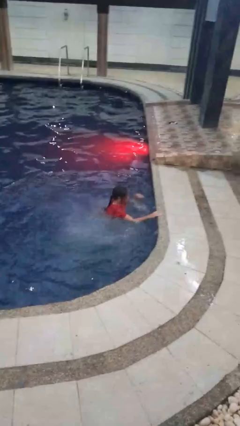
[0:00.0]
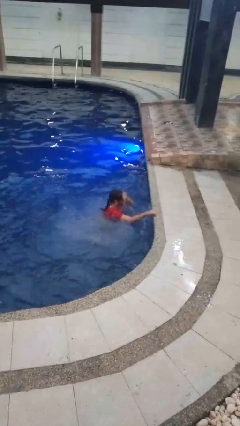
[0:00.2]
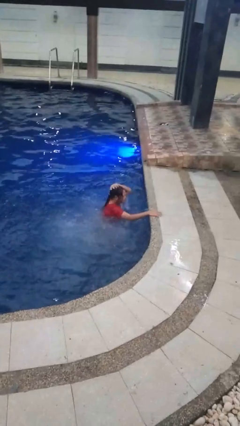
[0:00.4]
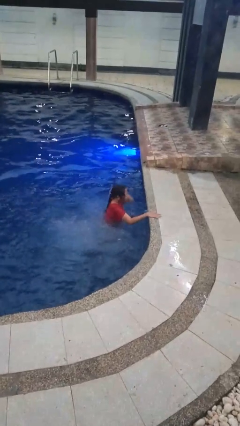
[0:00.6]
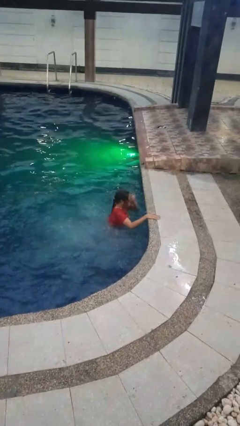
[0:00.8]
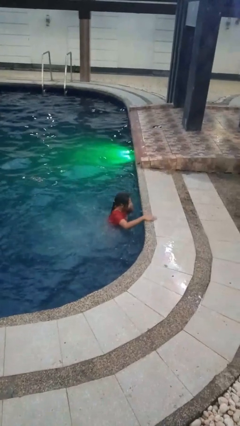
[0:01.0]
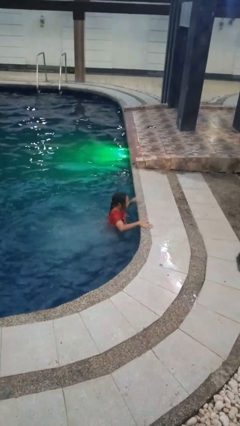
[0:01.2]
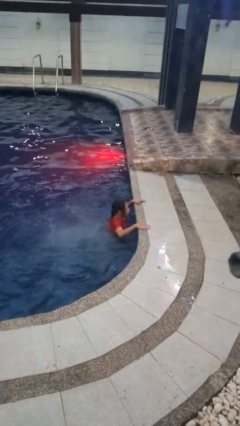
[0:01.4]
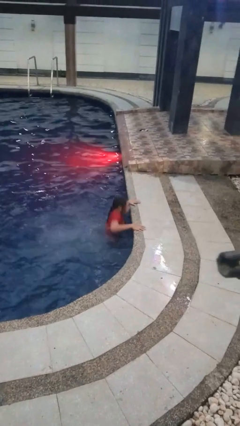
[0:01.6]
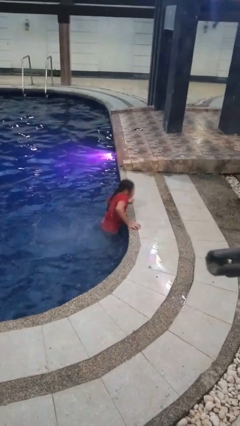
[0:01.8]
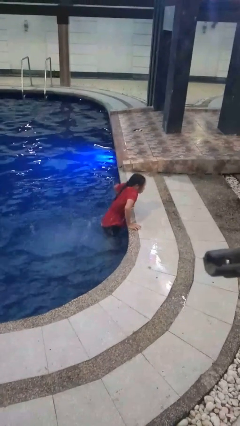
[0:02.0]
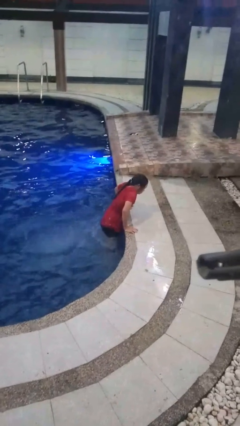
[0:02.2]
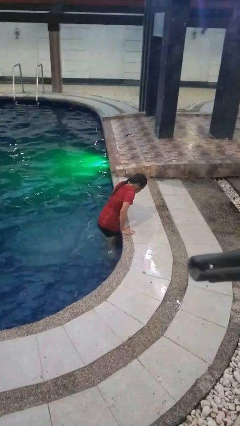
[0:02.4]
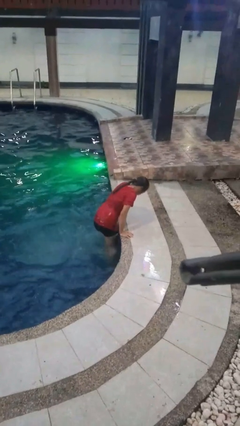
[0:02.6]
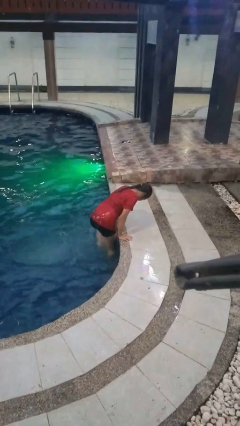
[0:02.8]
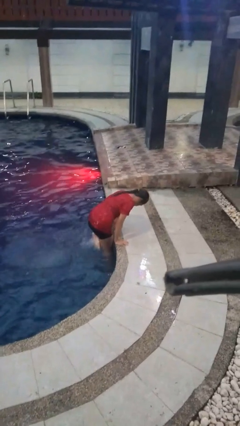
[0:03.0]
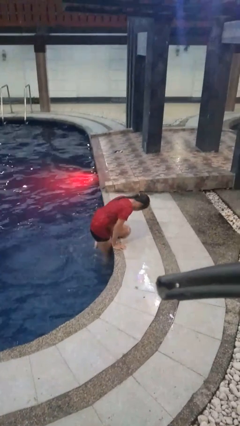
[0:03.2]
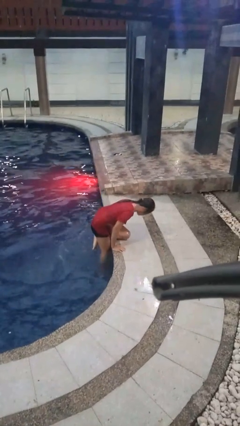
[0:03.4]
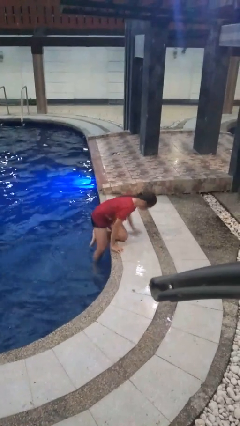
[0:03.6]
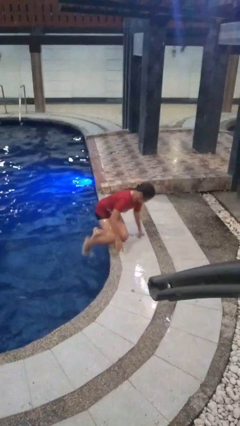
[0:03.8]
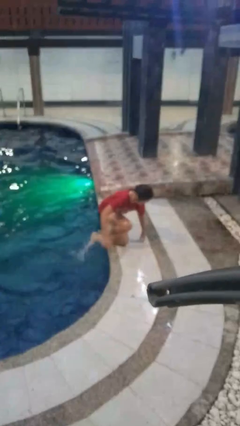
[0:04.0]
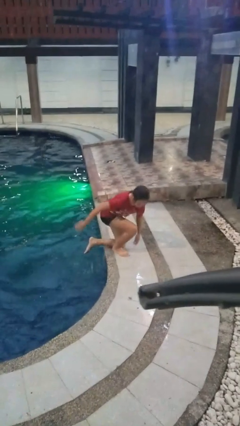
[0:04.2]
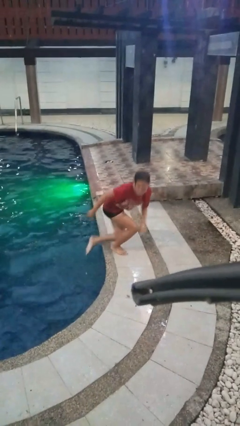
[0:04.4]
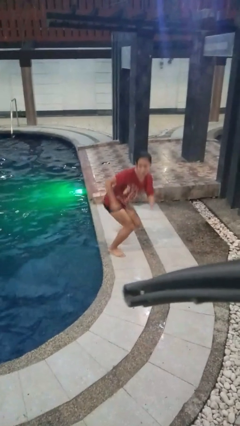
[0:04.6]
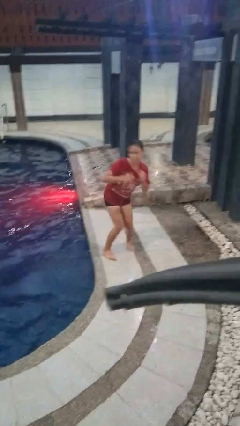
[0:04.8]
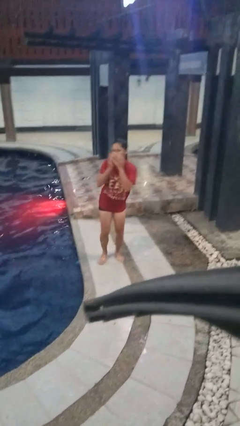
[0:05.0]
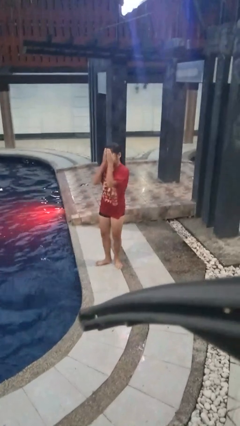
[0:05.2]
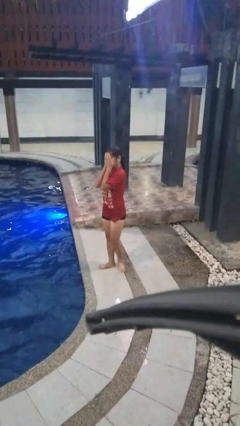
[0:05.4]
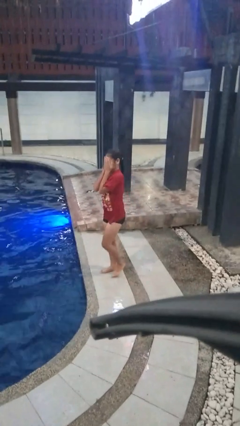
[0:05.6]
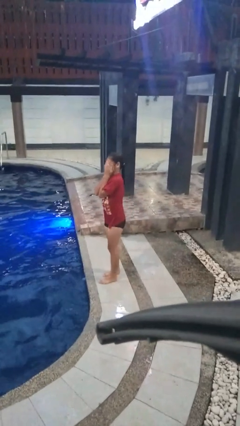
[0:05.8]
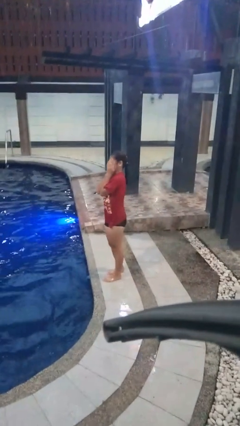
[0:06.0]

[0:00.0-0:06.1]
person exits pool

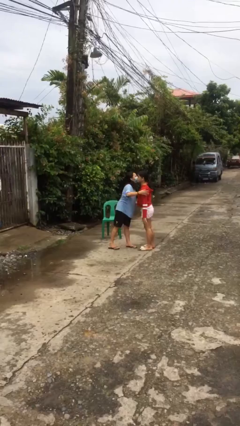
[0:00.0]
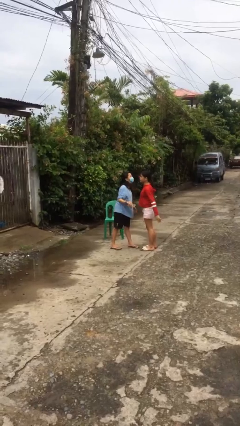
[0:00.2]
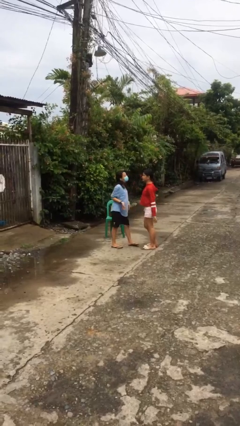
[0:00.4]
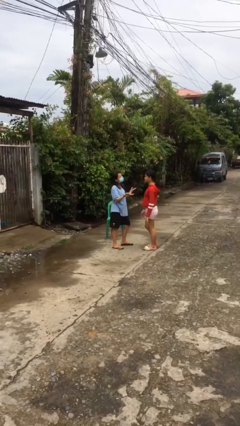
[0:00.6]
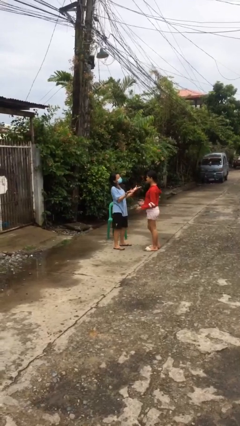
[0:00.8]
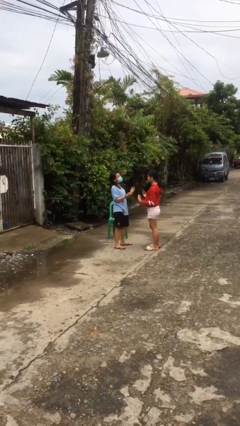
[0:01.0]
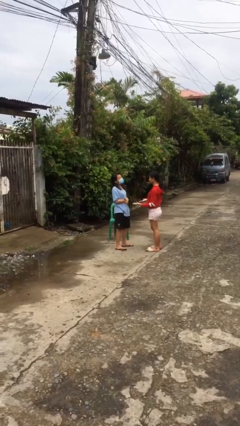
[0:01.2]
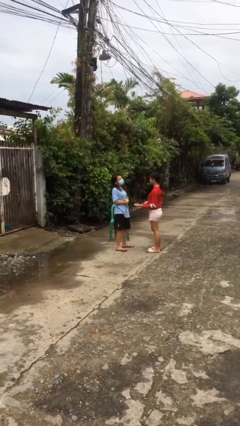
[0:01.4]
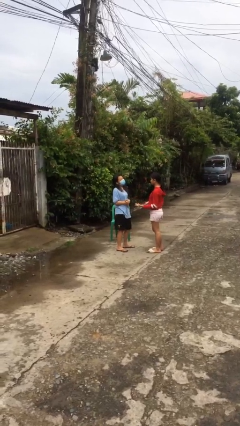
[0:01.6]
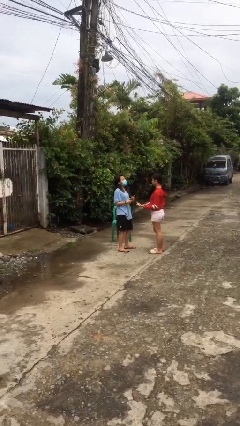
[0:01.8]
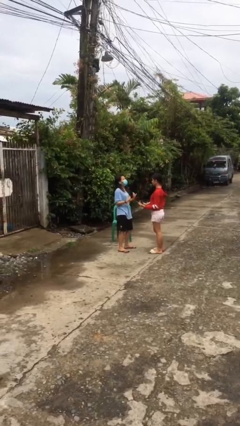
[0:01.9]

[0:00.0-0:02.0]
person talks to person

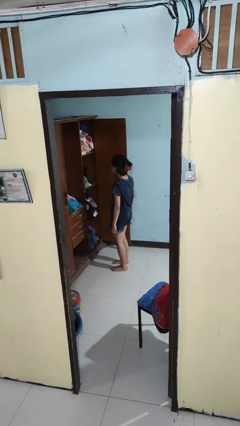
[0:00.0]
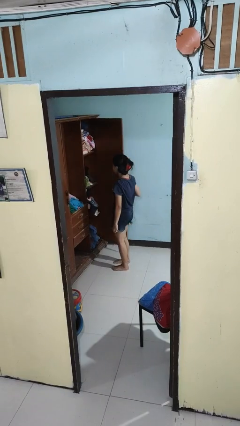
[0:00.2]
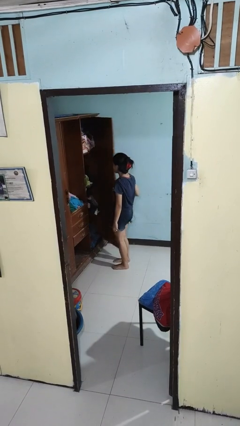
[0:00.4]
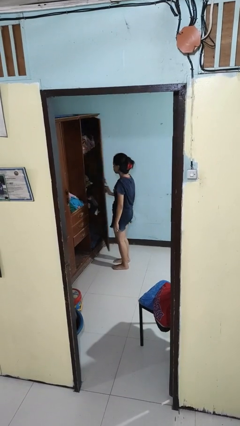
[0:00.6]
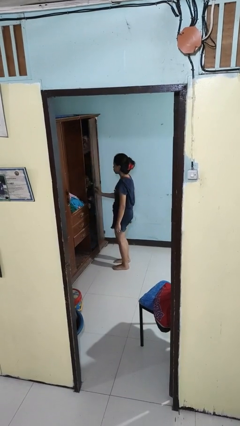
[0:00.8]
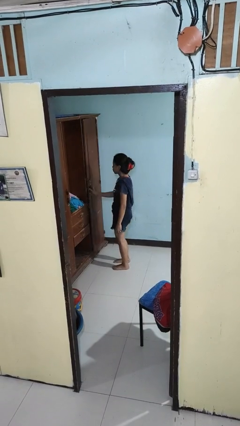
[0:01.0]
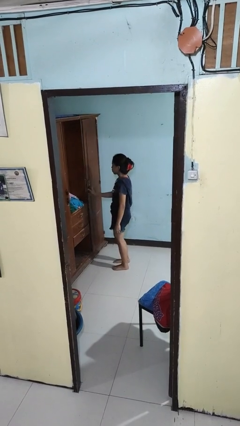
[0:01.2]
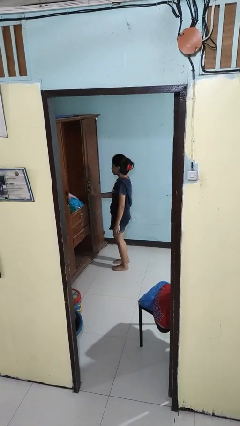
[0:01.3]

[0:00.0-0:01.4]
person closes closet door

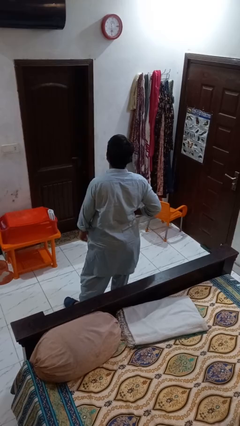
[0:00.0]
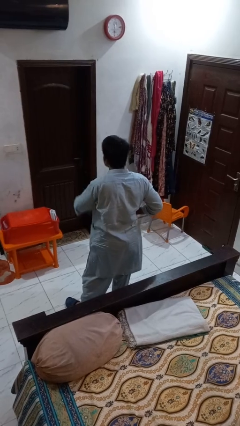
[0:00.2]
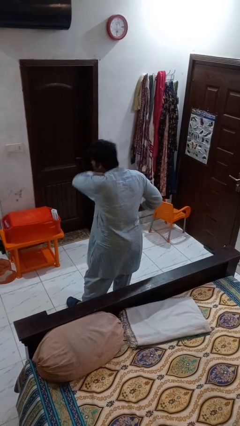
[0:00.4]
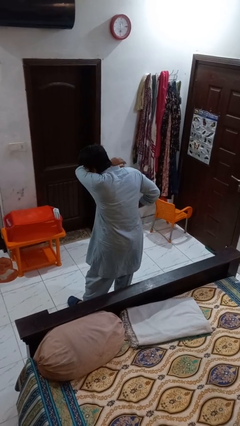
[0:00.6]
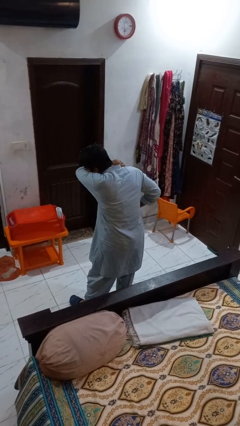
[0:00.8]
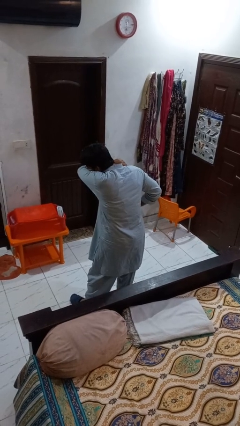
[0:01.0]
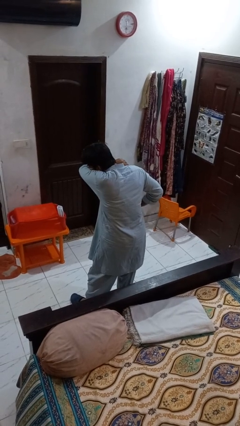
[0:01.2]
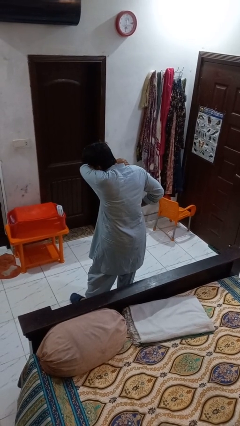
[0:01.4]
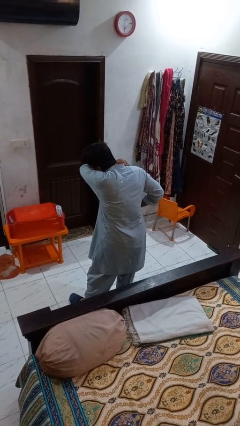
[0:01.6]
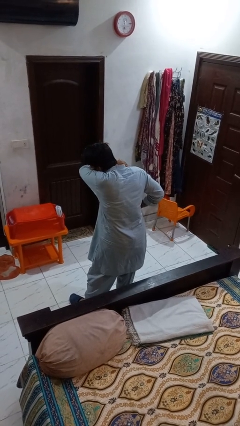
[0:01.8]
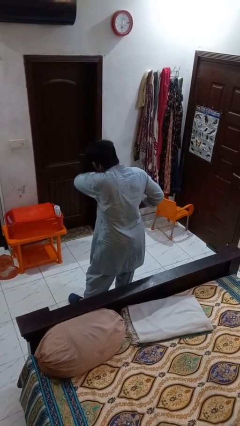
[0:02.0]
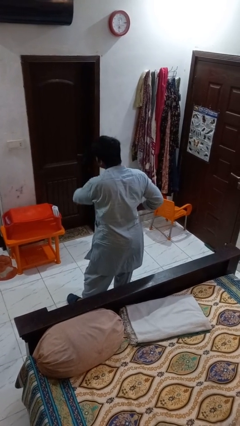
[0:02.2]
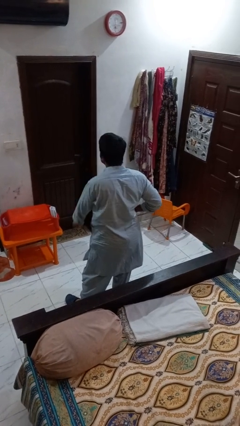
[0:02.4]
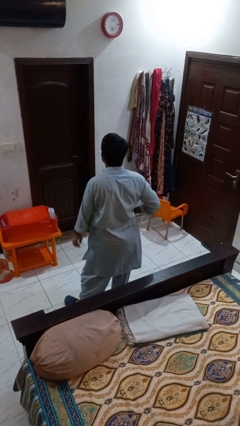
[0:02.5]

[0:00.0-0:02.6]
person sneezes into arm

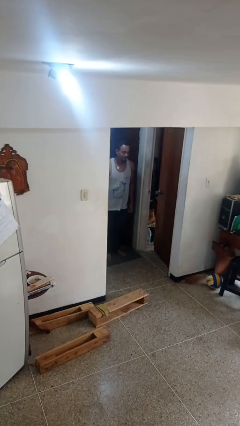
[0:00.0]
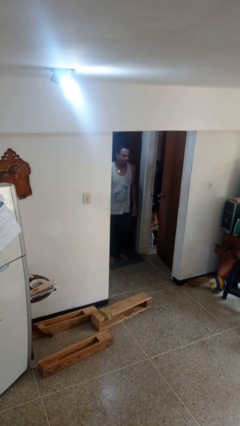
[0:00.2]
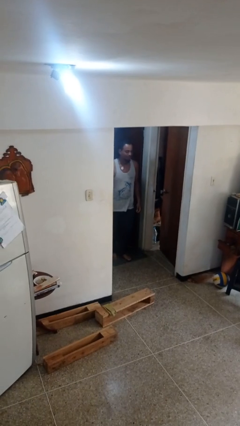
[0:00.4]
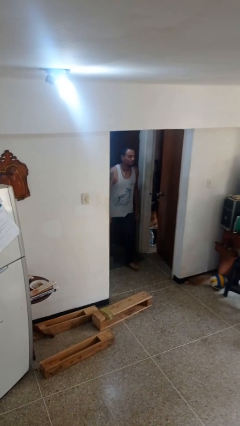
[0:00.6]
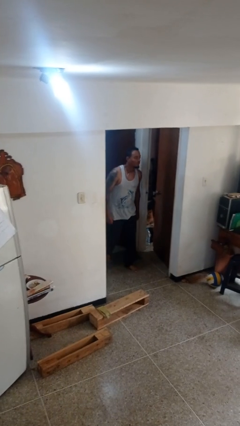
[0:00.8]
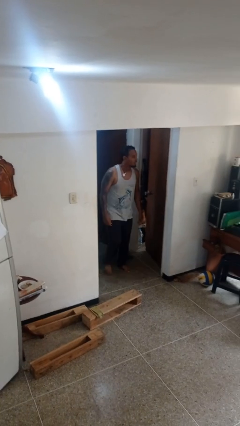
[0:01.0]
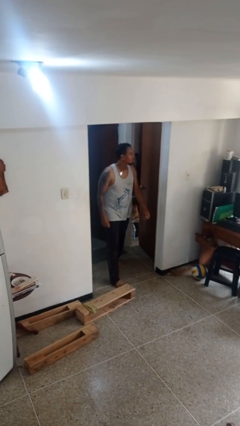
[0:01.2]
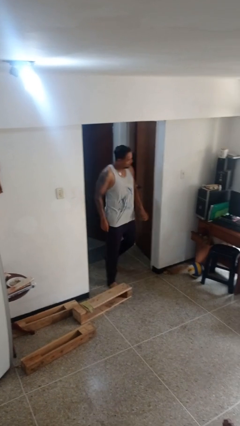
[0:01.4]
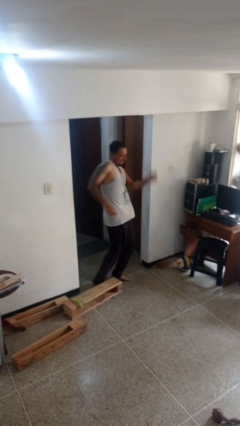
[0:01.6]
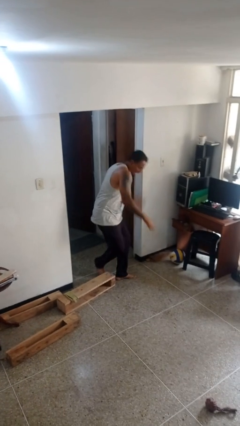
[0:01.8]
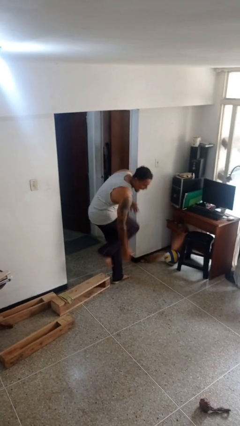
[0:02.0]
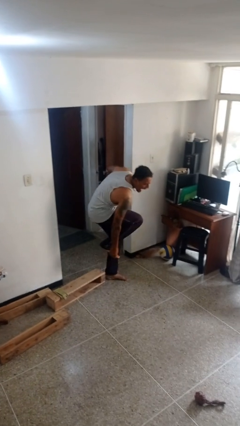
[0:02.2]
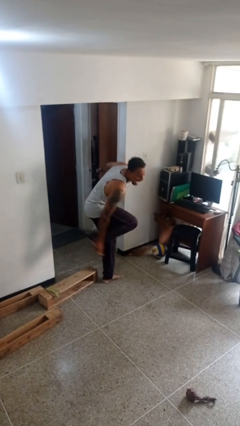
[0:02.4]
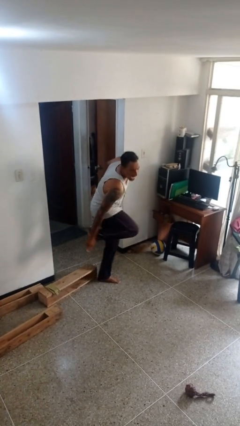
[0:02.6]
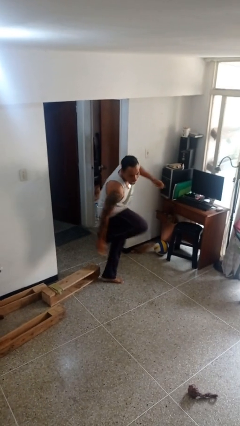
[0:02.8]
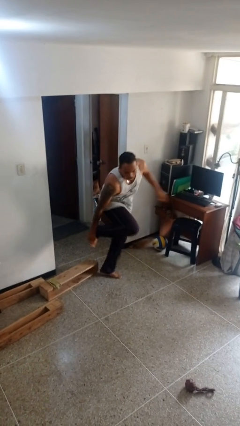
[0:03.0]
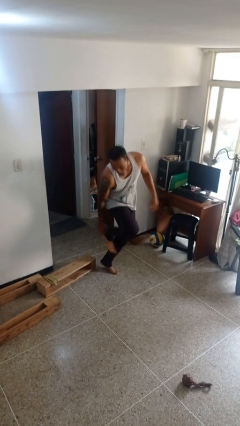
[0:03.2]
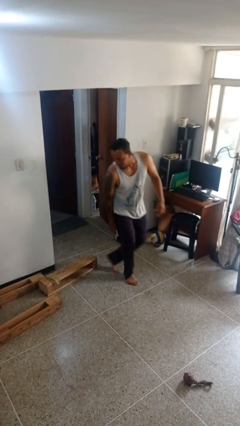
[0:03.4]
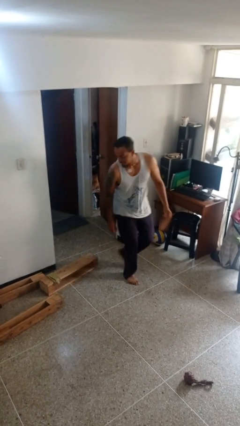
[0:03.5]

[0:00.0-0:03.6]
person stubs toe

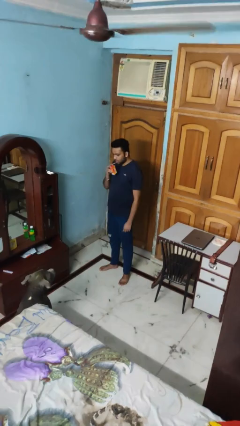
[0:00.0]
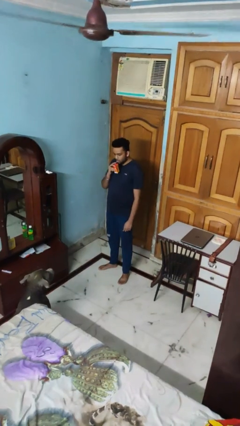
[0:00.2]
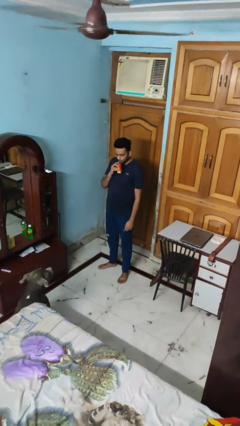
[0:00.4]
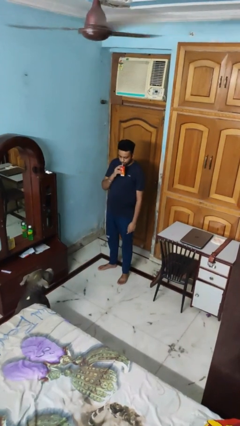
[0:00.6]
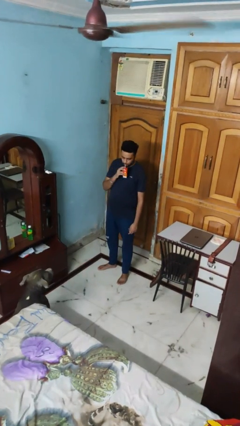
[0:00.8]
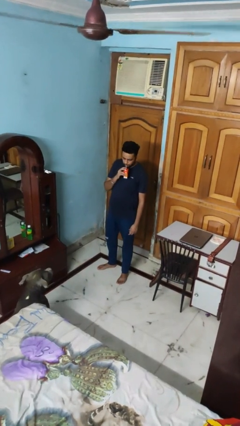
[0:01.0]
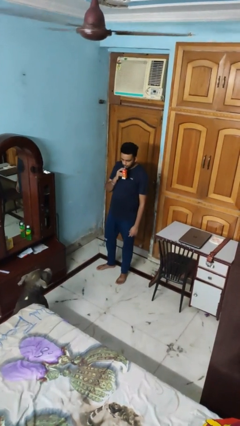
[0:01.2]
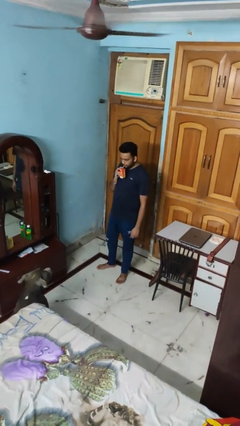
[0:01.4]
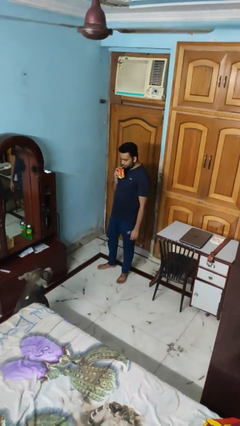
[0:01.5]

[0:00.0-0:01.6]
person drinks from straw

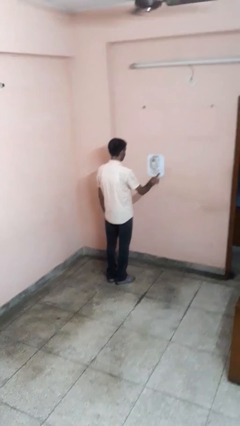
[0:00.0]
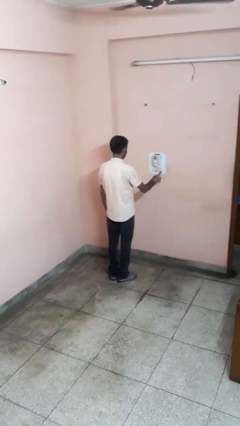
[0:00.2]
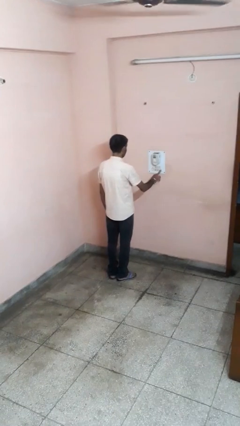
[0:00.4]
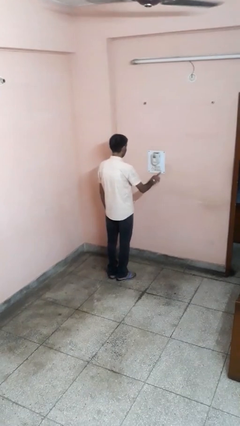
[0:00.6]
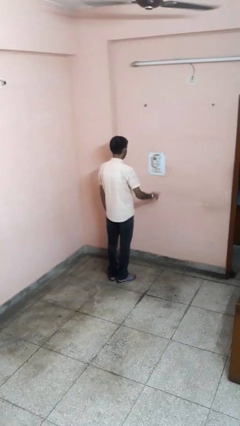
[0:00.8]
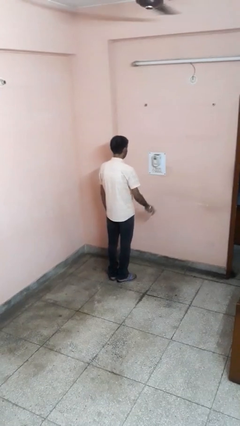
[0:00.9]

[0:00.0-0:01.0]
person turns on fan
